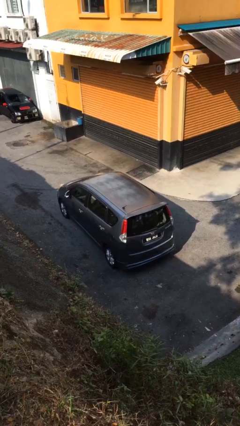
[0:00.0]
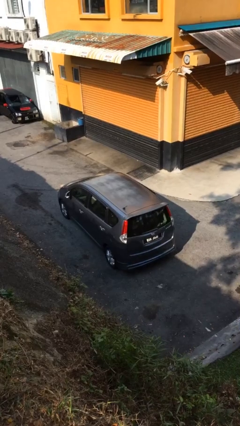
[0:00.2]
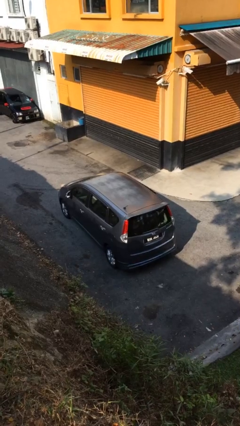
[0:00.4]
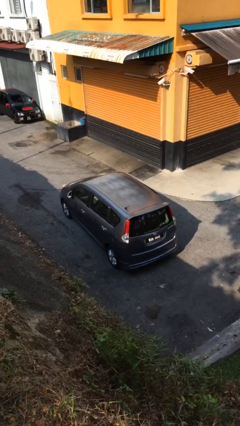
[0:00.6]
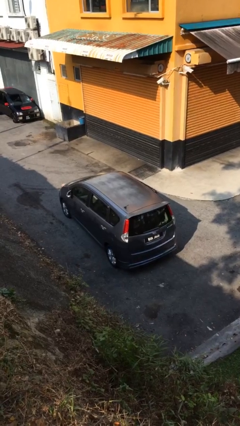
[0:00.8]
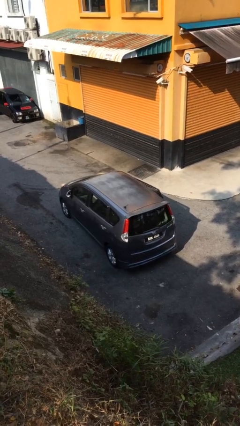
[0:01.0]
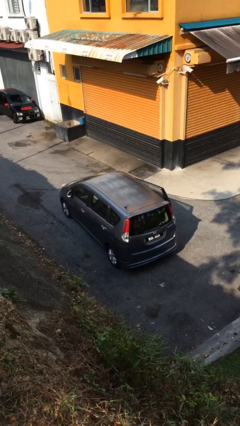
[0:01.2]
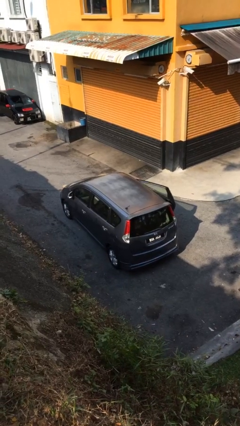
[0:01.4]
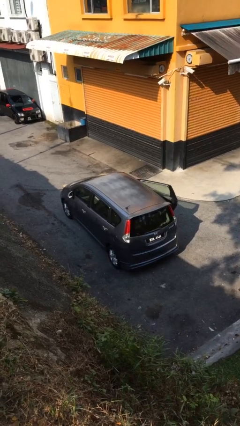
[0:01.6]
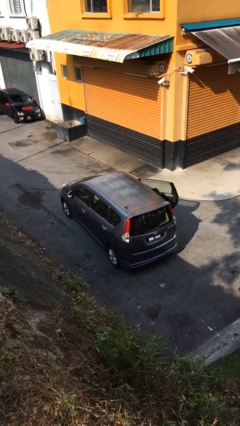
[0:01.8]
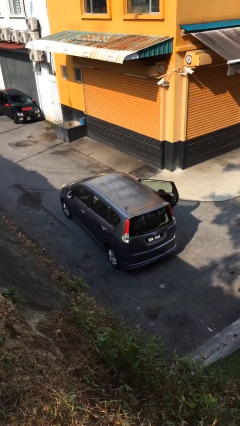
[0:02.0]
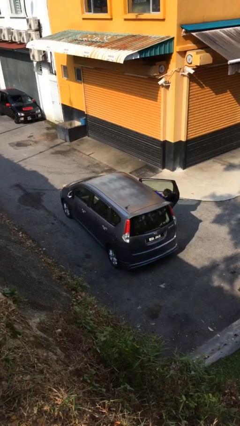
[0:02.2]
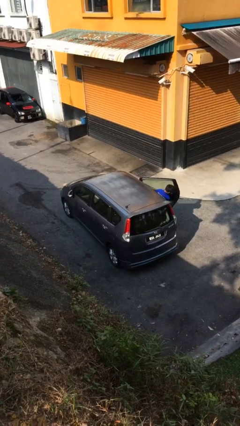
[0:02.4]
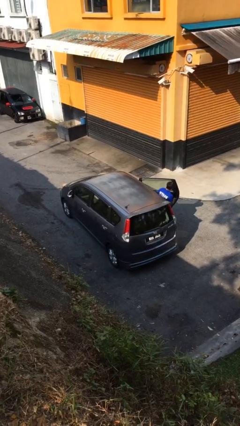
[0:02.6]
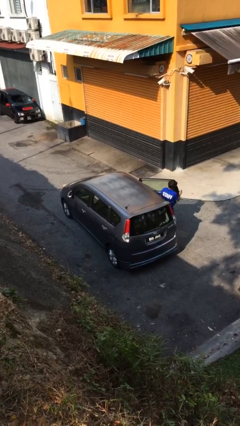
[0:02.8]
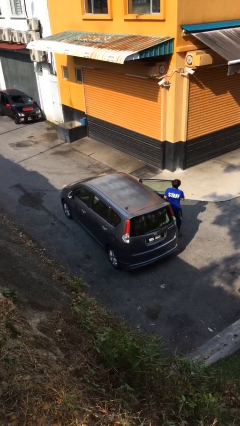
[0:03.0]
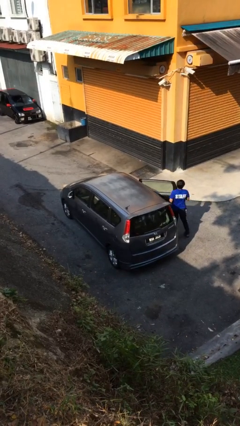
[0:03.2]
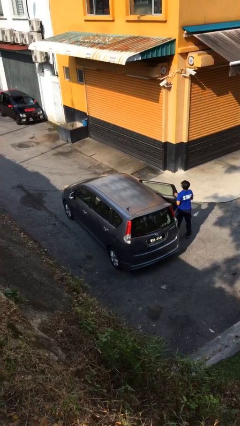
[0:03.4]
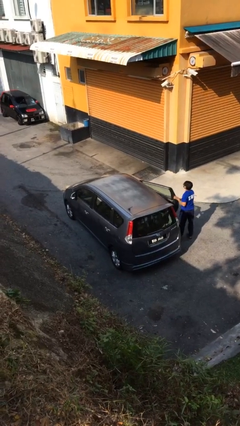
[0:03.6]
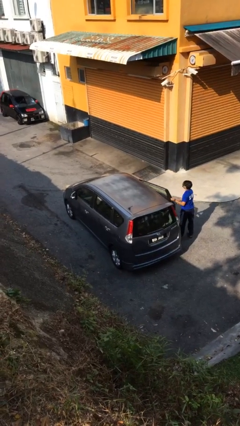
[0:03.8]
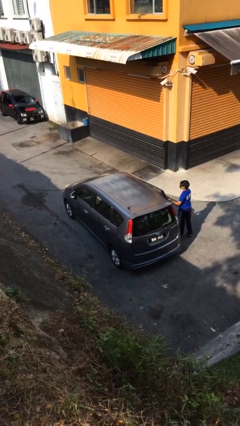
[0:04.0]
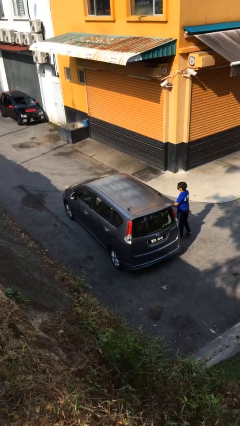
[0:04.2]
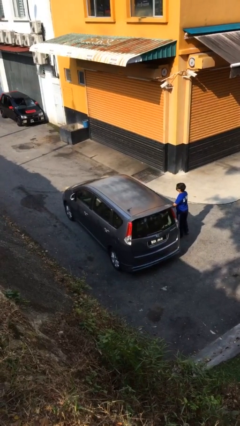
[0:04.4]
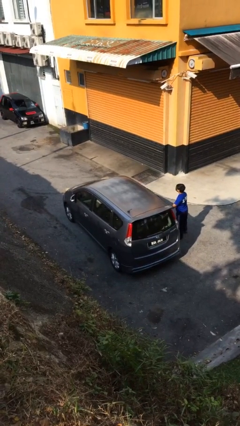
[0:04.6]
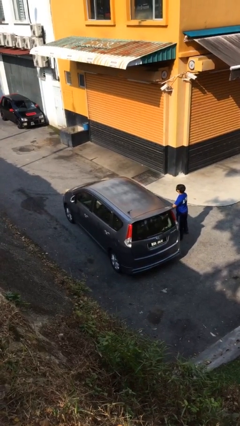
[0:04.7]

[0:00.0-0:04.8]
car drops off person

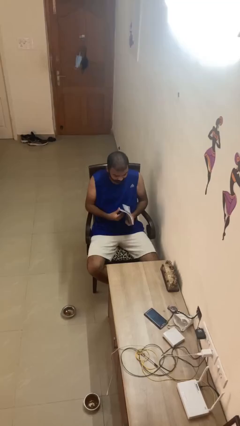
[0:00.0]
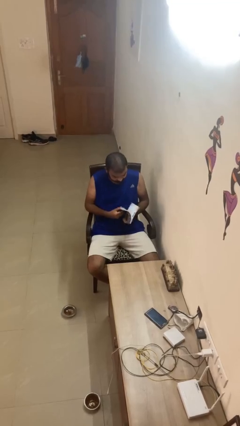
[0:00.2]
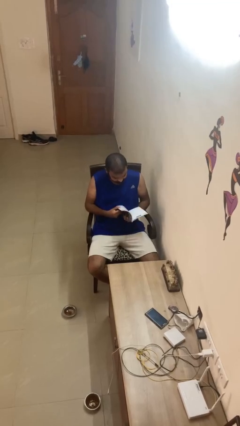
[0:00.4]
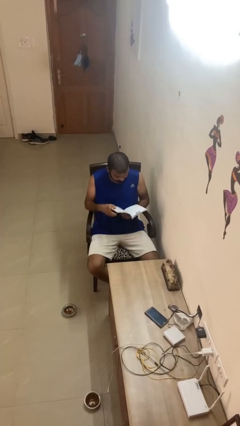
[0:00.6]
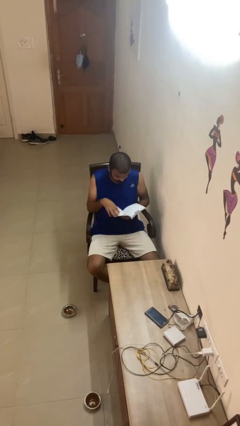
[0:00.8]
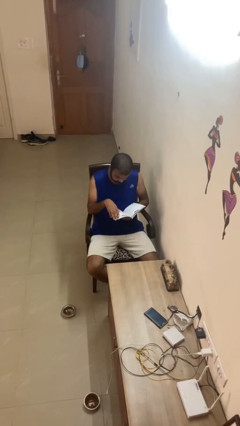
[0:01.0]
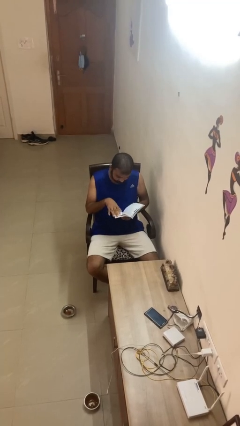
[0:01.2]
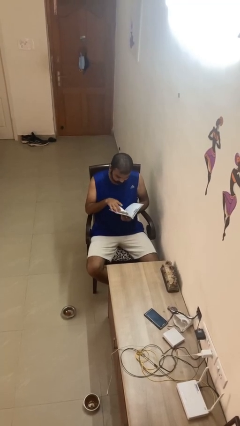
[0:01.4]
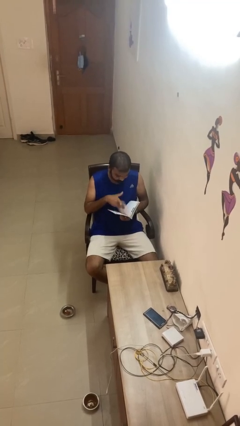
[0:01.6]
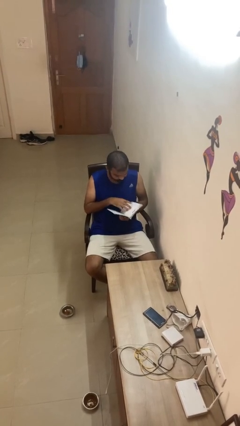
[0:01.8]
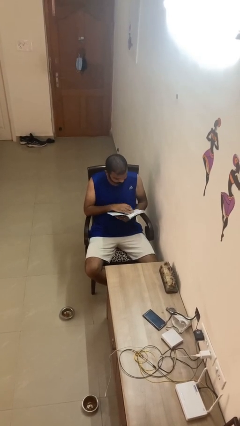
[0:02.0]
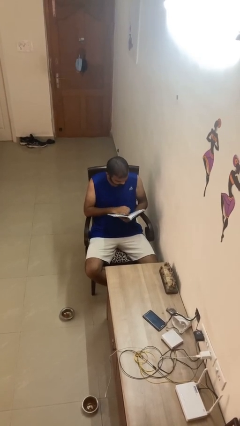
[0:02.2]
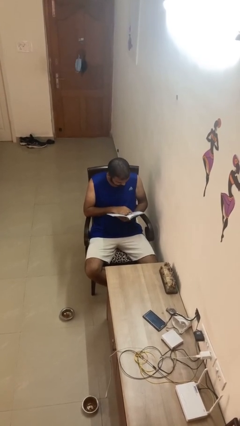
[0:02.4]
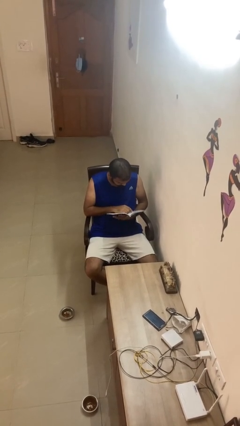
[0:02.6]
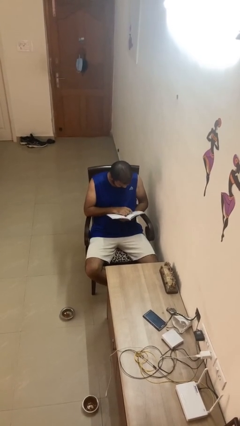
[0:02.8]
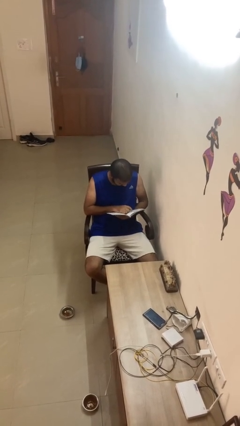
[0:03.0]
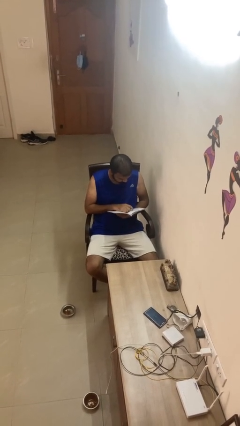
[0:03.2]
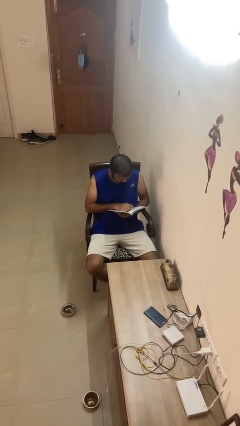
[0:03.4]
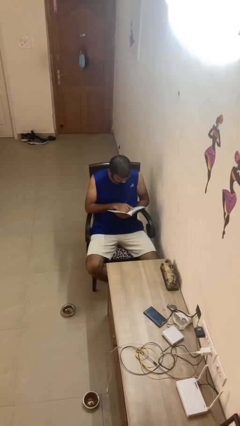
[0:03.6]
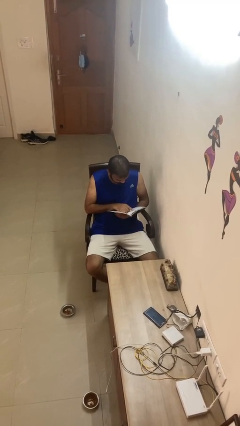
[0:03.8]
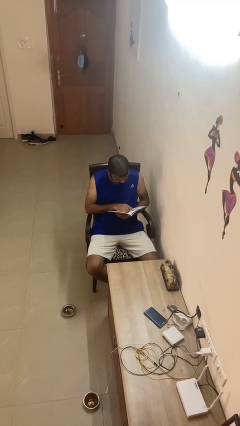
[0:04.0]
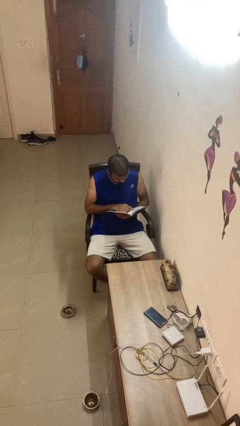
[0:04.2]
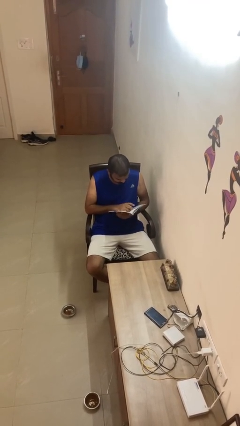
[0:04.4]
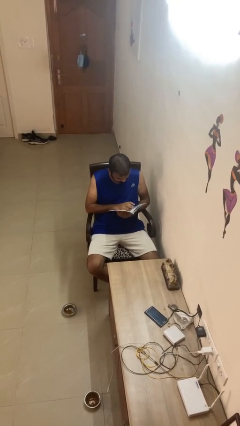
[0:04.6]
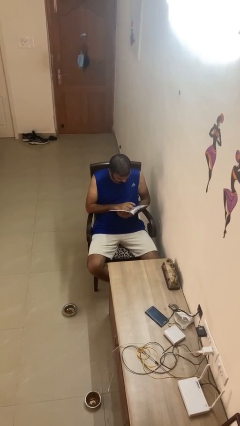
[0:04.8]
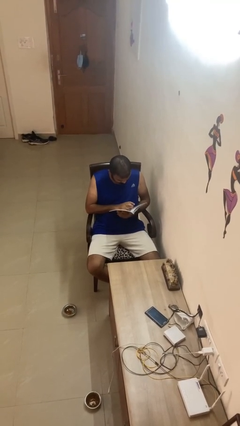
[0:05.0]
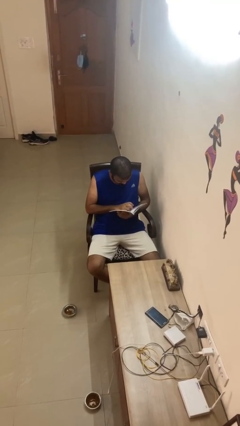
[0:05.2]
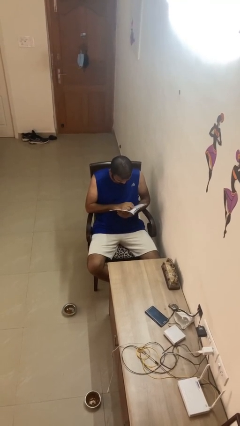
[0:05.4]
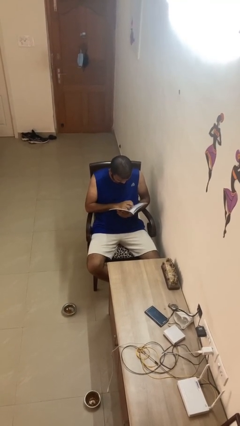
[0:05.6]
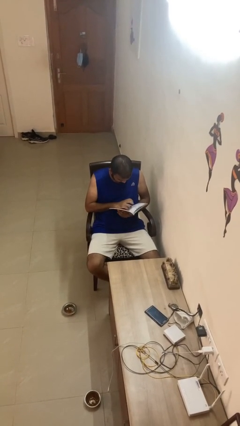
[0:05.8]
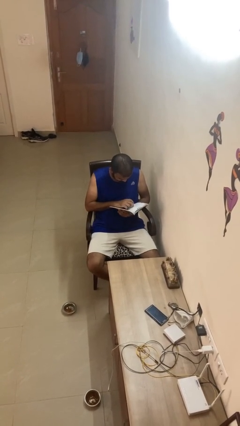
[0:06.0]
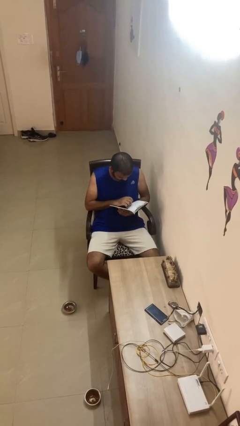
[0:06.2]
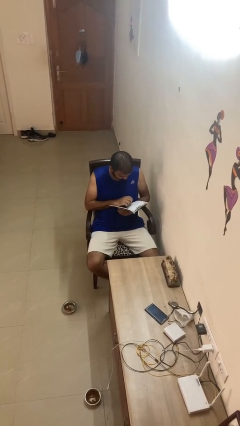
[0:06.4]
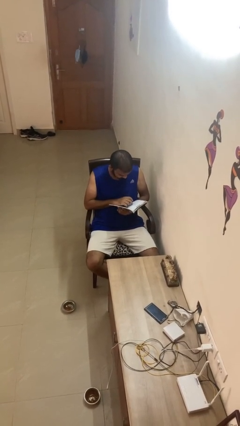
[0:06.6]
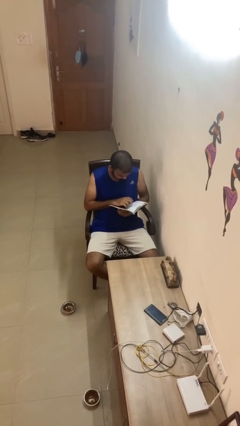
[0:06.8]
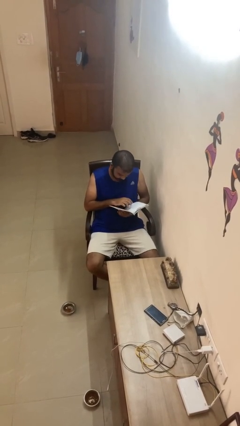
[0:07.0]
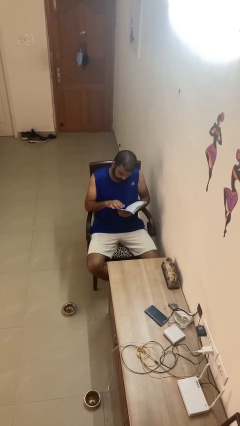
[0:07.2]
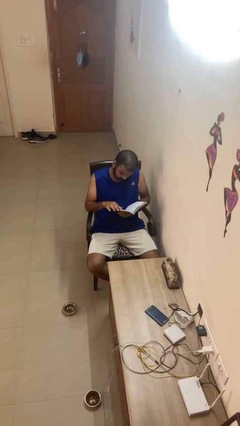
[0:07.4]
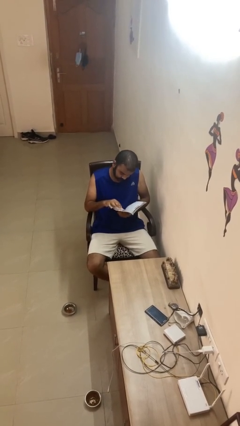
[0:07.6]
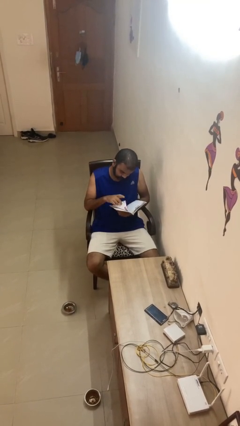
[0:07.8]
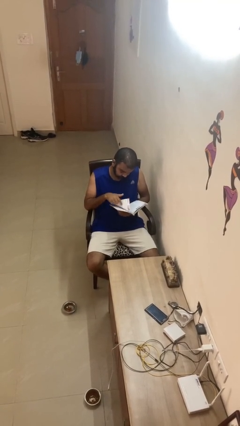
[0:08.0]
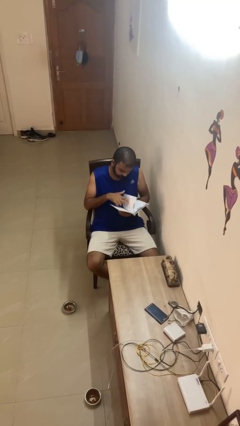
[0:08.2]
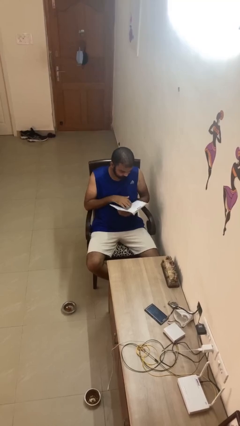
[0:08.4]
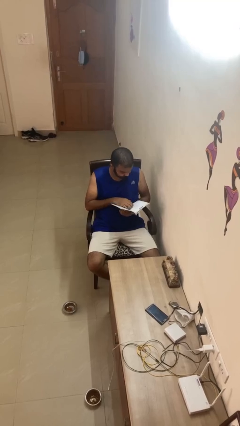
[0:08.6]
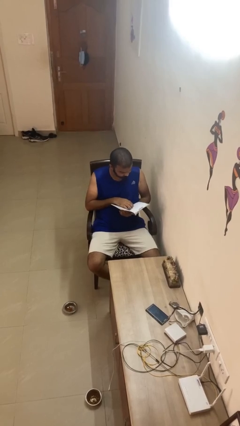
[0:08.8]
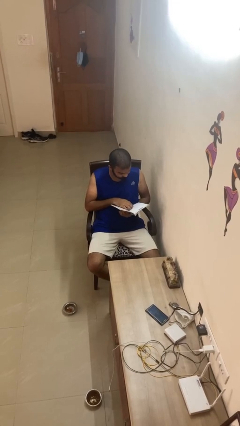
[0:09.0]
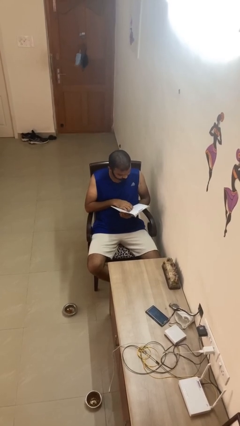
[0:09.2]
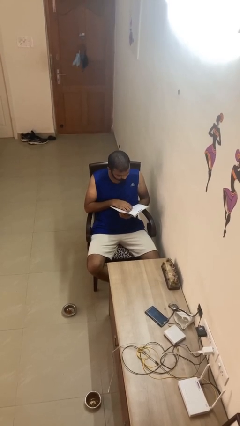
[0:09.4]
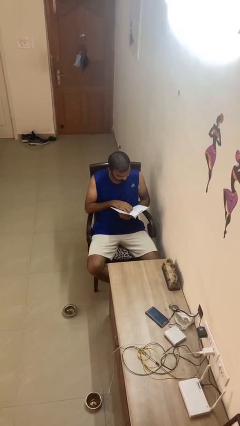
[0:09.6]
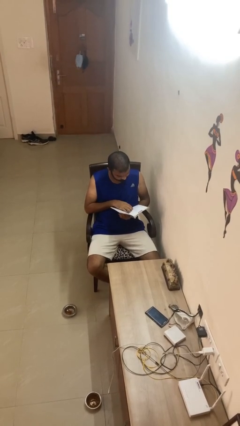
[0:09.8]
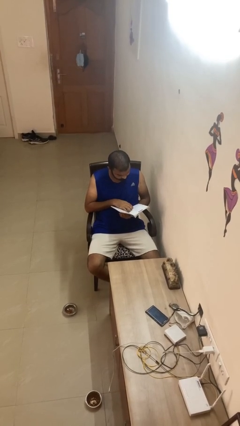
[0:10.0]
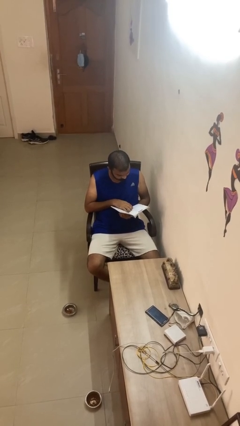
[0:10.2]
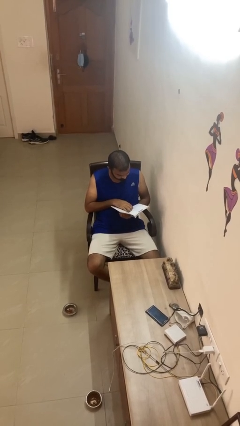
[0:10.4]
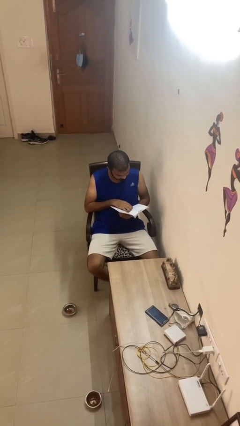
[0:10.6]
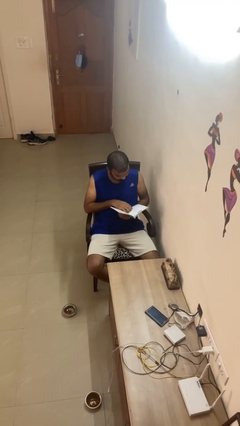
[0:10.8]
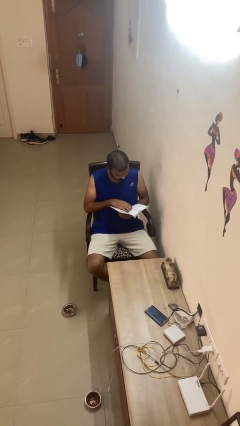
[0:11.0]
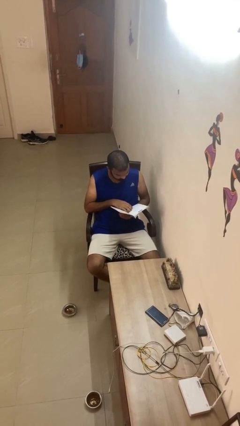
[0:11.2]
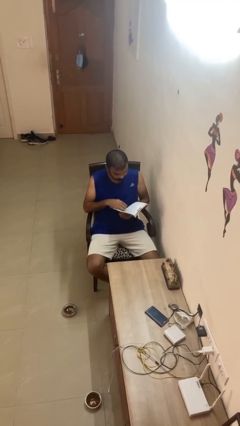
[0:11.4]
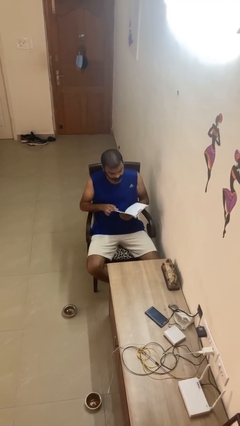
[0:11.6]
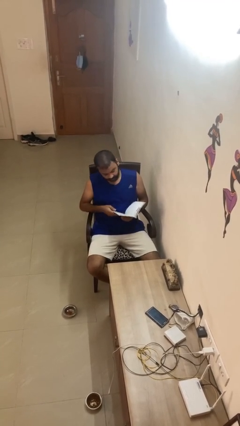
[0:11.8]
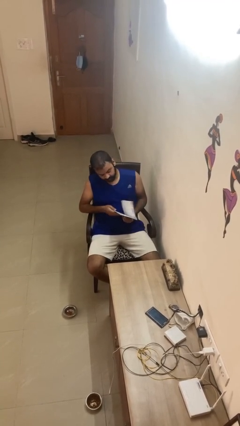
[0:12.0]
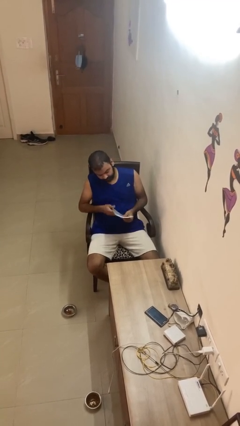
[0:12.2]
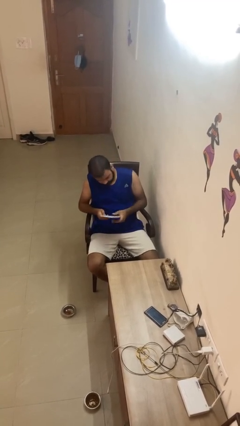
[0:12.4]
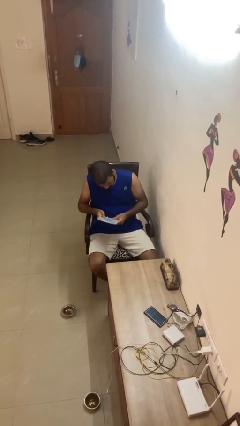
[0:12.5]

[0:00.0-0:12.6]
person reads document

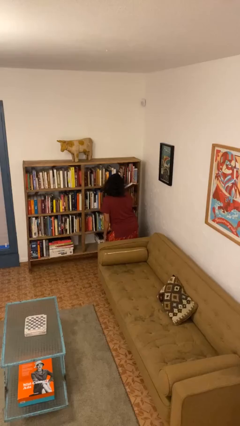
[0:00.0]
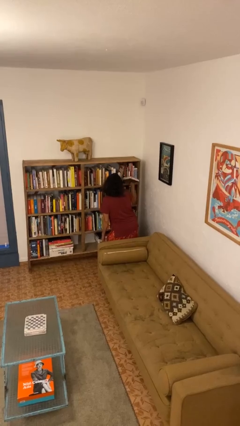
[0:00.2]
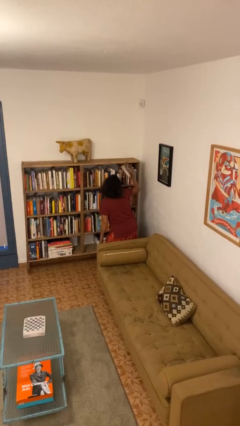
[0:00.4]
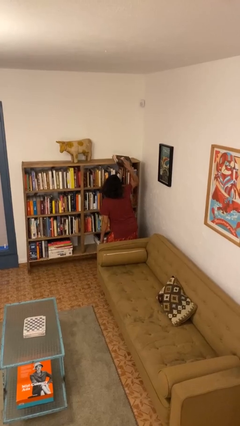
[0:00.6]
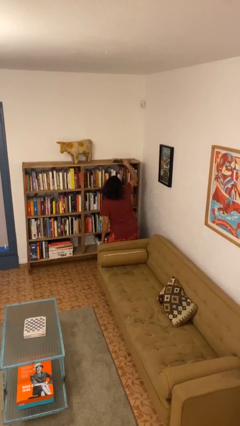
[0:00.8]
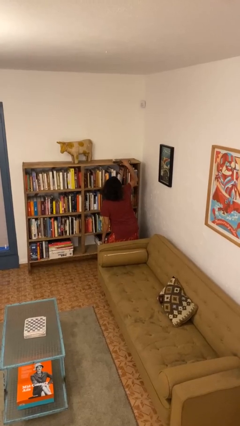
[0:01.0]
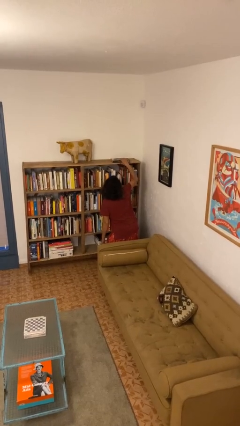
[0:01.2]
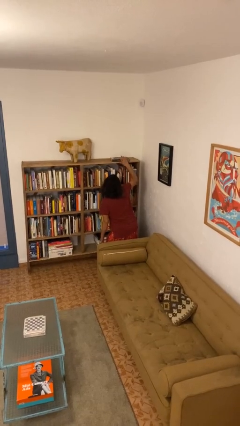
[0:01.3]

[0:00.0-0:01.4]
person puts down object on shelf
